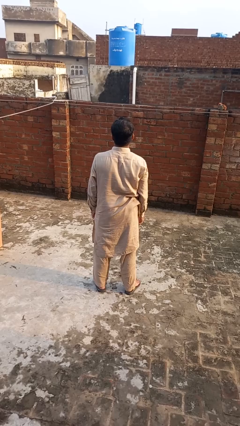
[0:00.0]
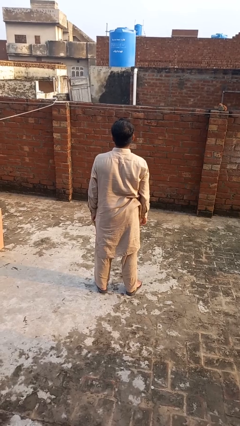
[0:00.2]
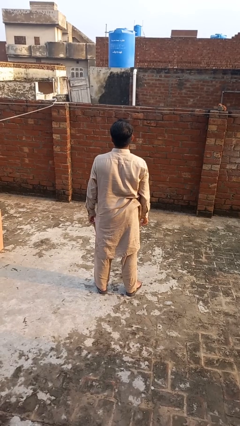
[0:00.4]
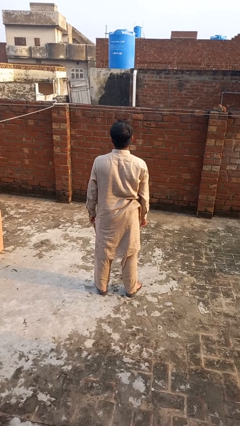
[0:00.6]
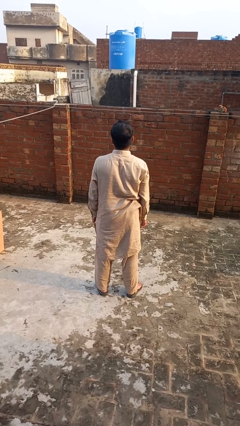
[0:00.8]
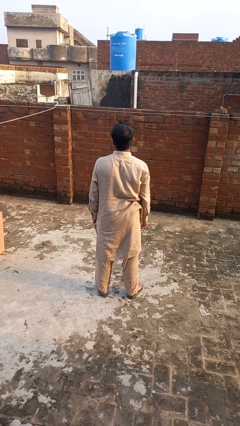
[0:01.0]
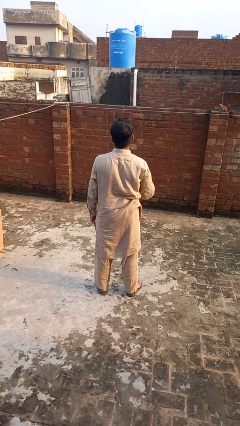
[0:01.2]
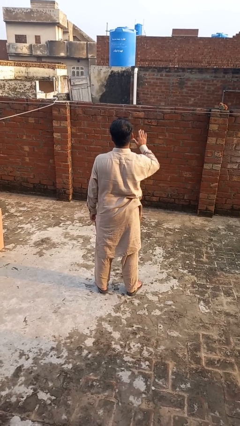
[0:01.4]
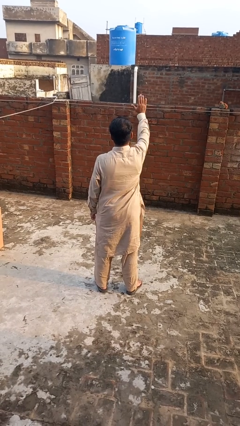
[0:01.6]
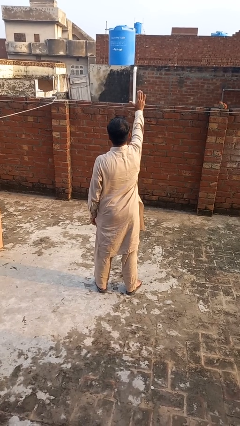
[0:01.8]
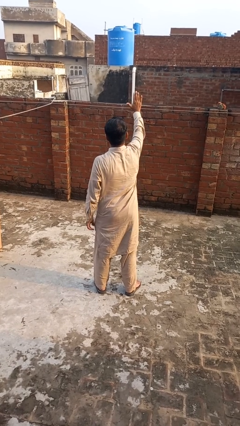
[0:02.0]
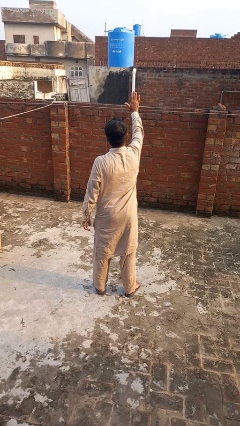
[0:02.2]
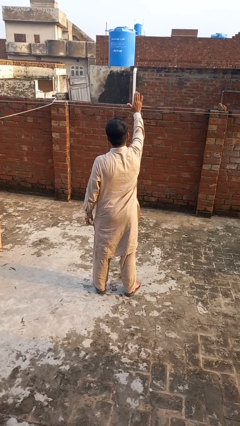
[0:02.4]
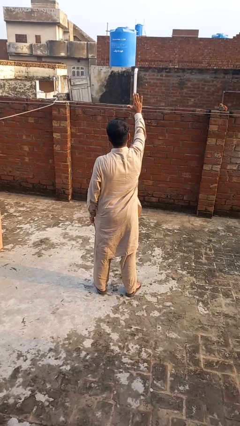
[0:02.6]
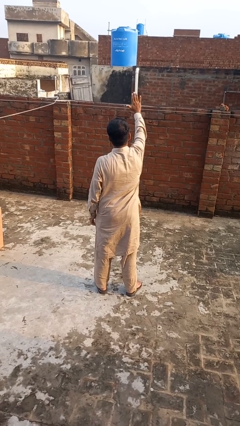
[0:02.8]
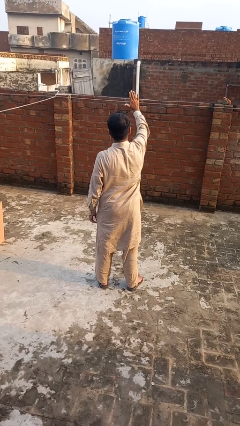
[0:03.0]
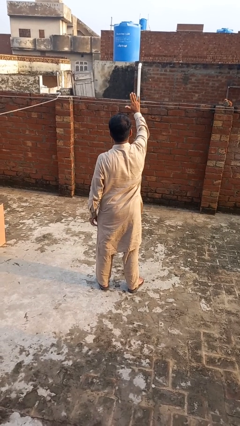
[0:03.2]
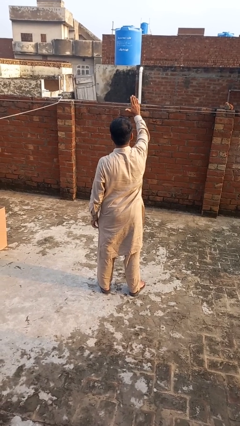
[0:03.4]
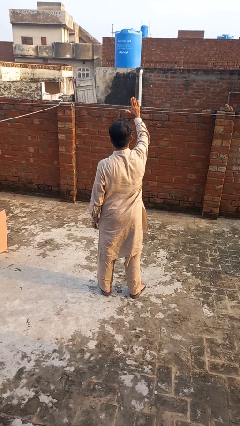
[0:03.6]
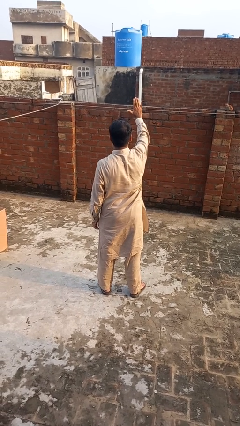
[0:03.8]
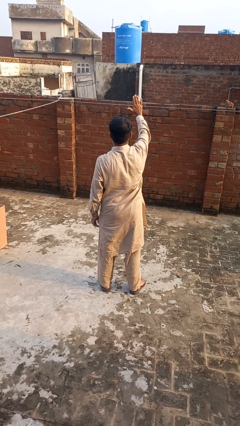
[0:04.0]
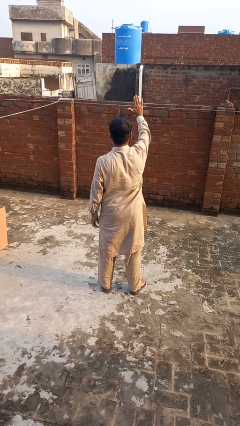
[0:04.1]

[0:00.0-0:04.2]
person gestures stop

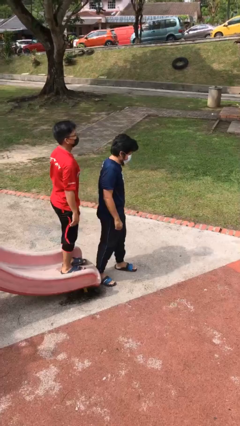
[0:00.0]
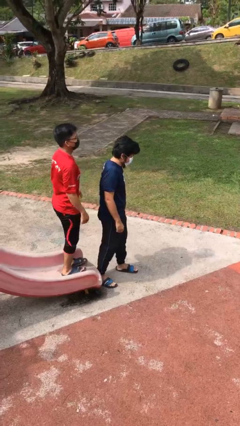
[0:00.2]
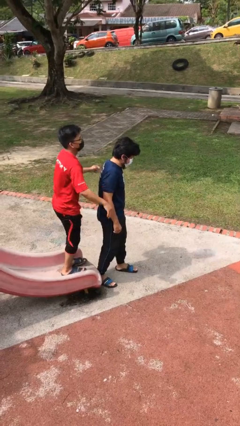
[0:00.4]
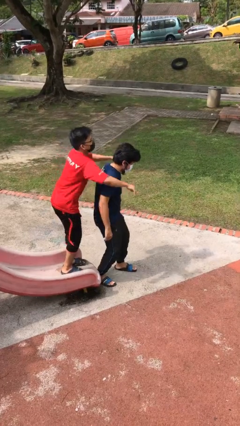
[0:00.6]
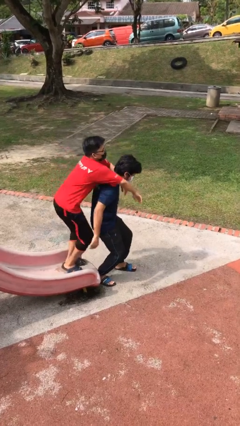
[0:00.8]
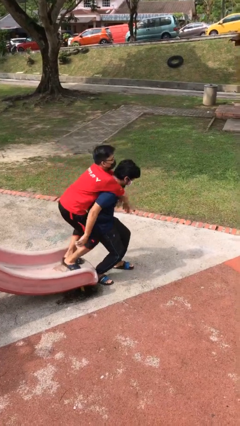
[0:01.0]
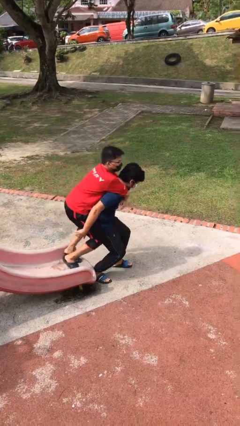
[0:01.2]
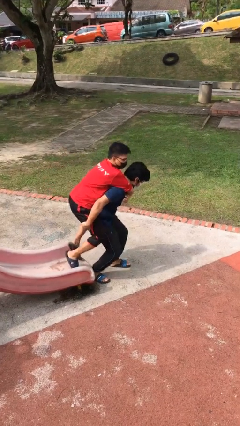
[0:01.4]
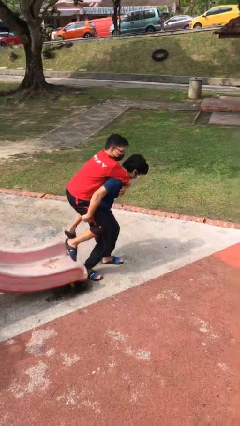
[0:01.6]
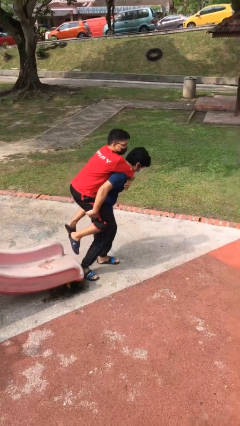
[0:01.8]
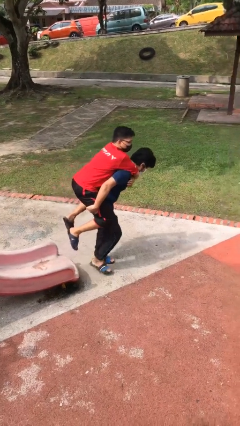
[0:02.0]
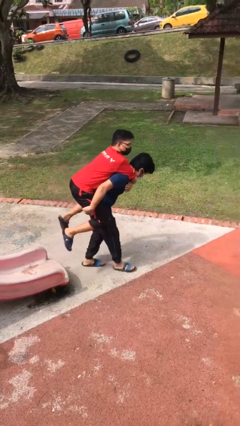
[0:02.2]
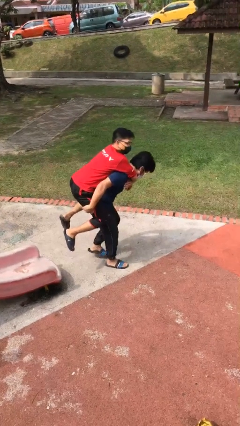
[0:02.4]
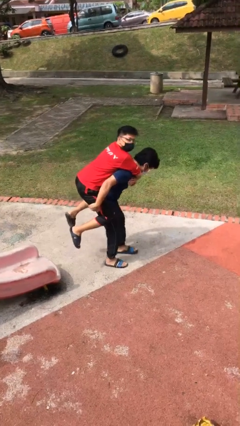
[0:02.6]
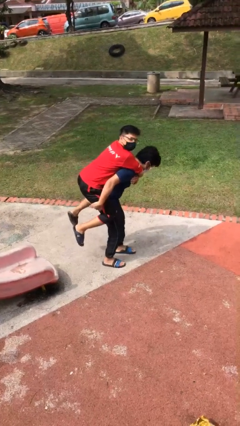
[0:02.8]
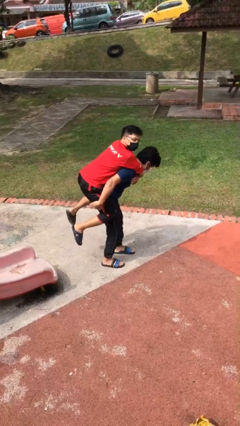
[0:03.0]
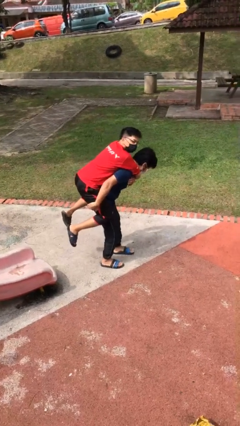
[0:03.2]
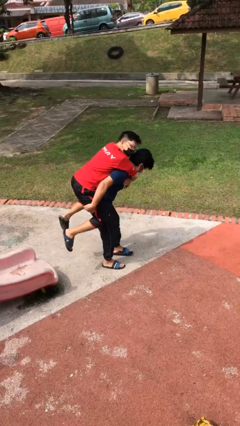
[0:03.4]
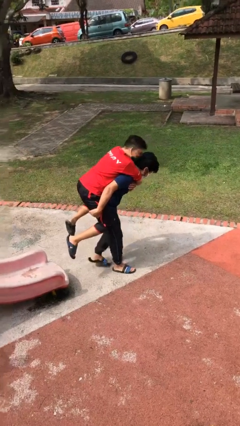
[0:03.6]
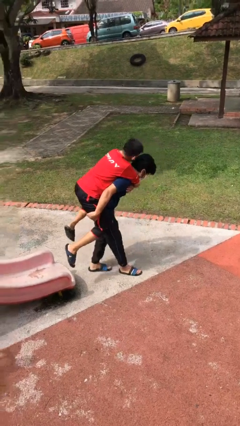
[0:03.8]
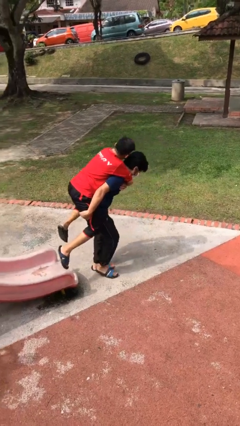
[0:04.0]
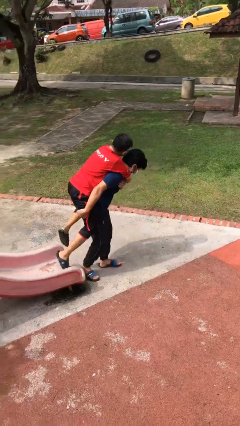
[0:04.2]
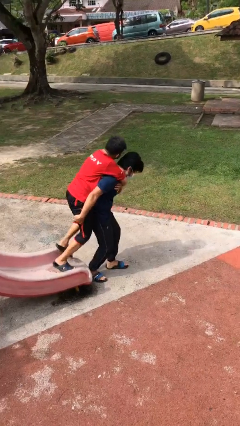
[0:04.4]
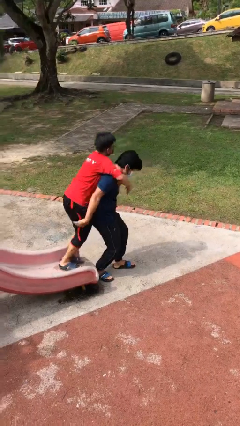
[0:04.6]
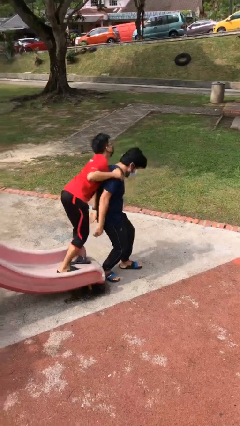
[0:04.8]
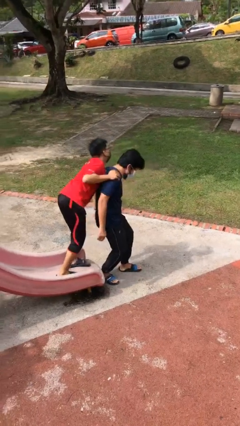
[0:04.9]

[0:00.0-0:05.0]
person carries person on back

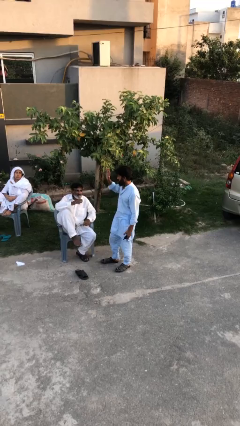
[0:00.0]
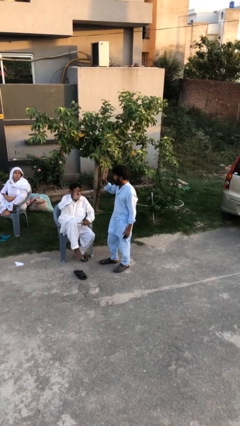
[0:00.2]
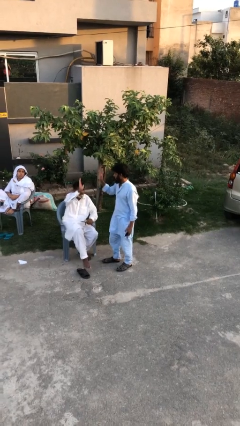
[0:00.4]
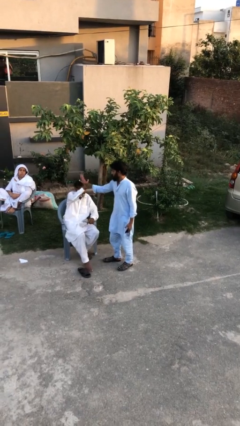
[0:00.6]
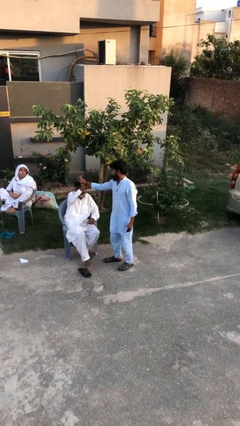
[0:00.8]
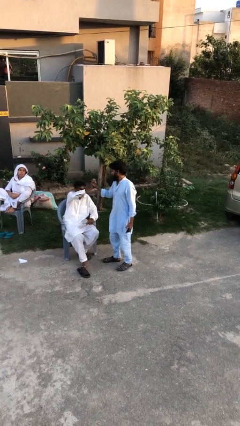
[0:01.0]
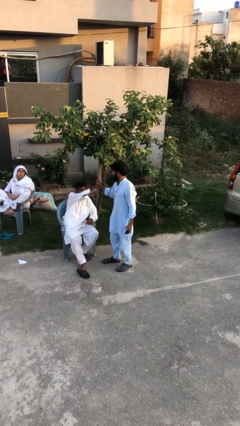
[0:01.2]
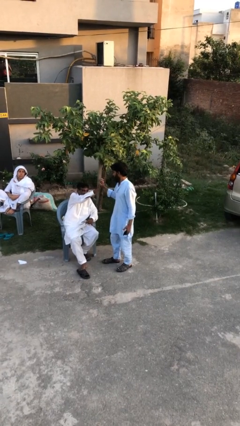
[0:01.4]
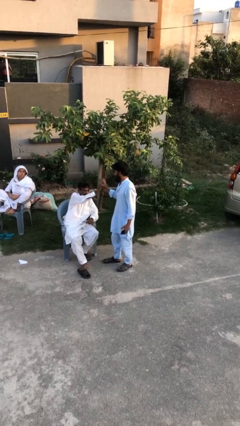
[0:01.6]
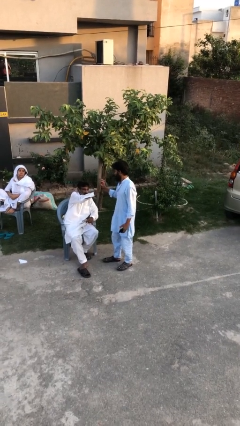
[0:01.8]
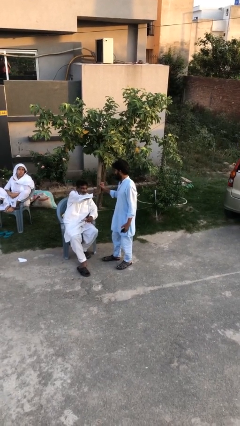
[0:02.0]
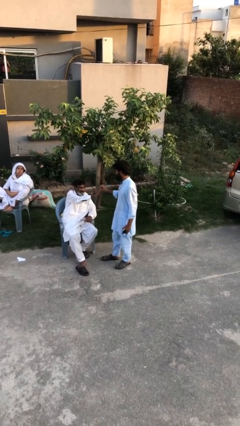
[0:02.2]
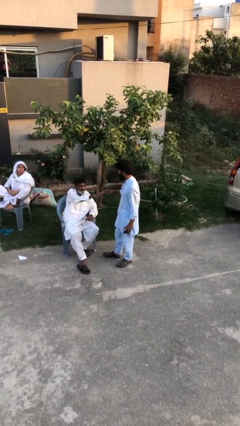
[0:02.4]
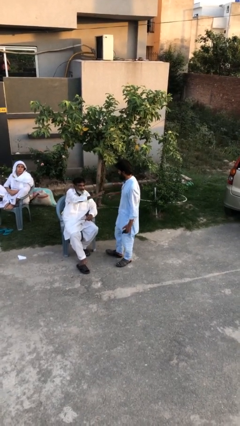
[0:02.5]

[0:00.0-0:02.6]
person highfives hand

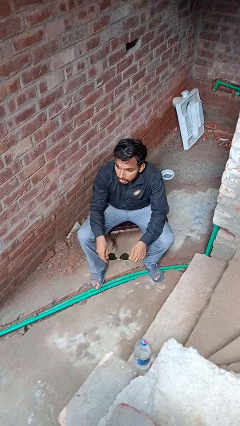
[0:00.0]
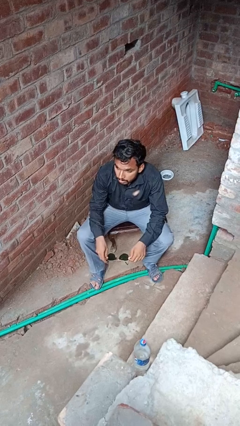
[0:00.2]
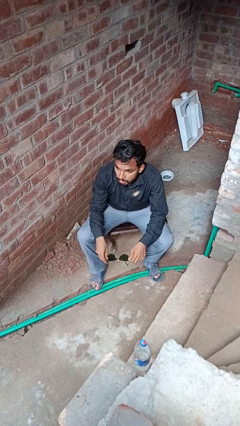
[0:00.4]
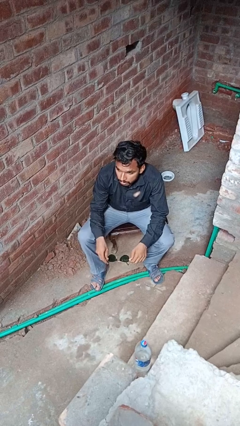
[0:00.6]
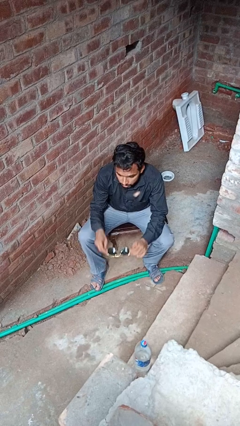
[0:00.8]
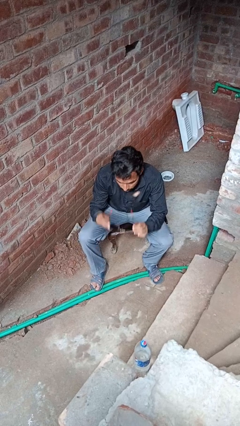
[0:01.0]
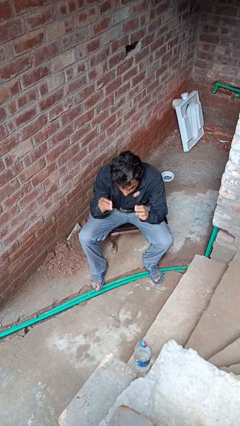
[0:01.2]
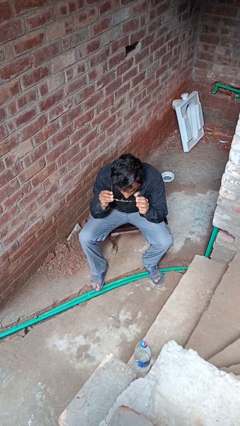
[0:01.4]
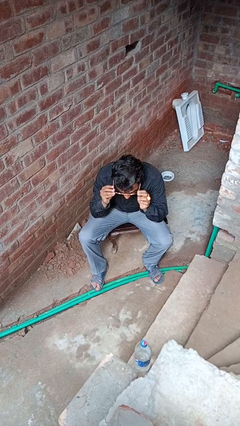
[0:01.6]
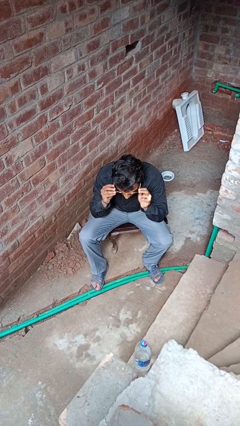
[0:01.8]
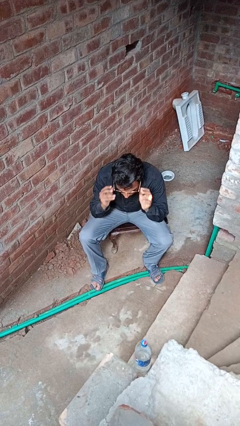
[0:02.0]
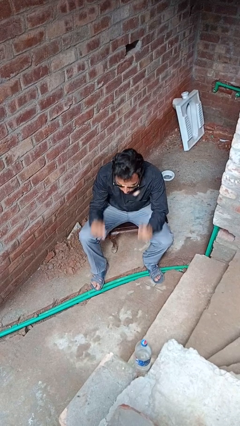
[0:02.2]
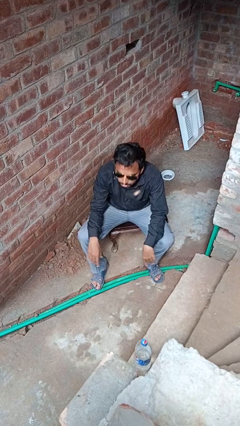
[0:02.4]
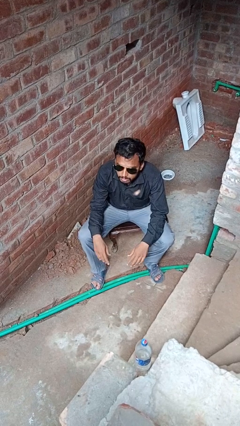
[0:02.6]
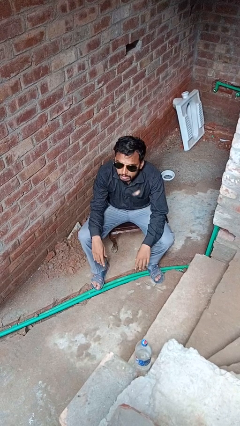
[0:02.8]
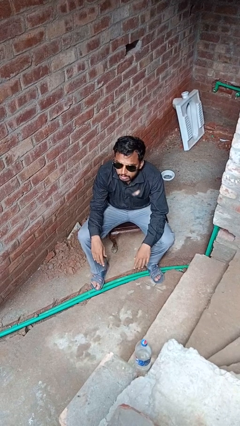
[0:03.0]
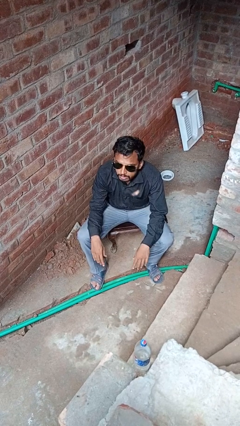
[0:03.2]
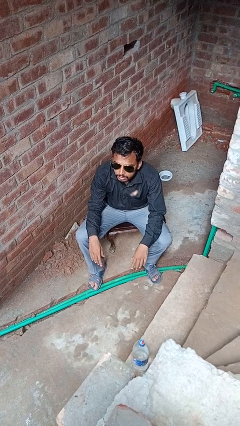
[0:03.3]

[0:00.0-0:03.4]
person puts on glasses

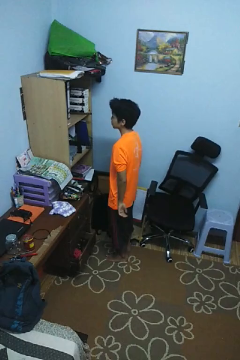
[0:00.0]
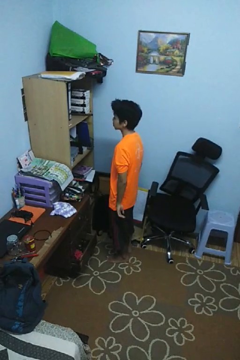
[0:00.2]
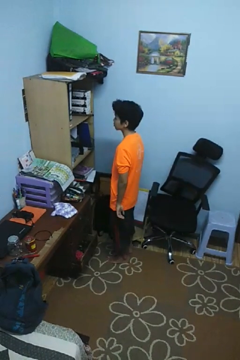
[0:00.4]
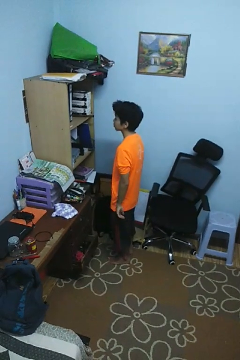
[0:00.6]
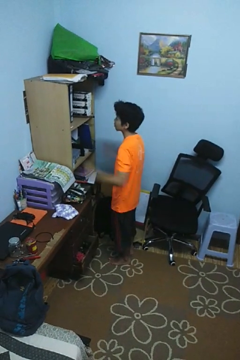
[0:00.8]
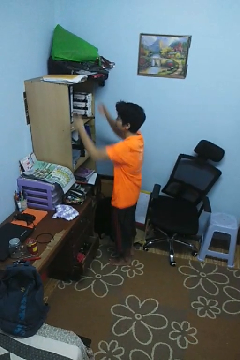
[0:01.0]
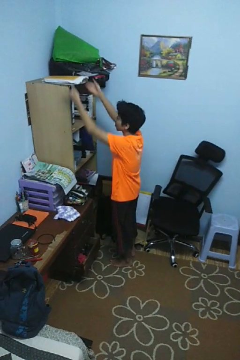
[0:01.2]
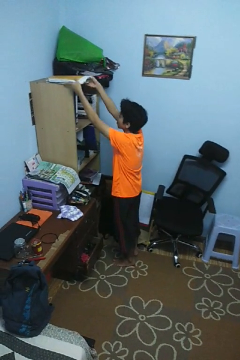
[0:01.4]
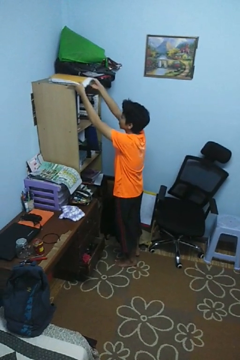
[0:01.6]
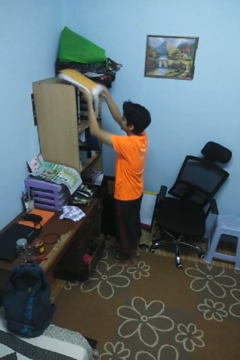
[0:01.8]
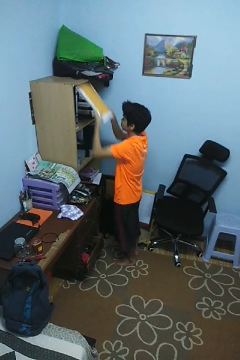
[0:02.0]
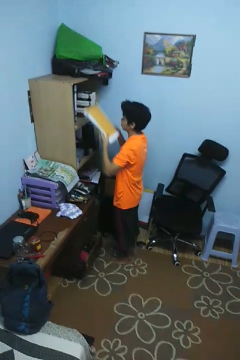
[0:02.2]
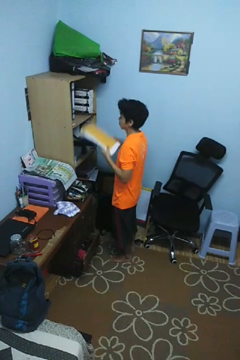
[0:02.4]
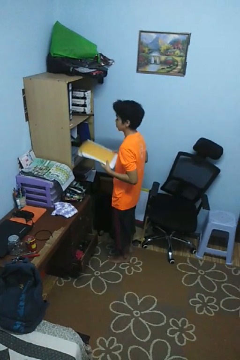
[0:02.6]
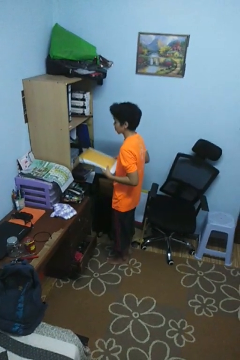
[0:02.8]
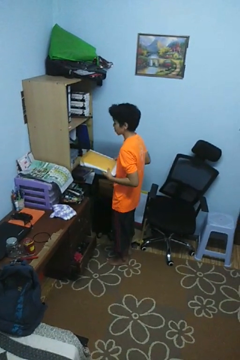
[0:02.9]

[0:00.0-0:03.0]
person picks up object from shelf
